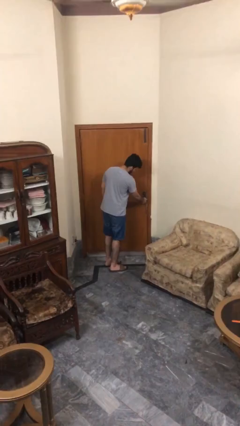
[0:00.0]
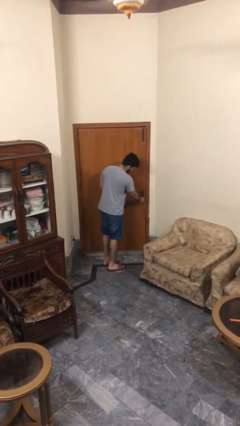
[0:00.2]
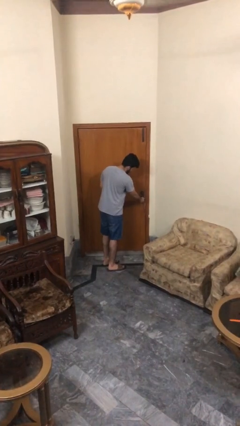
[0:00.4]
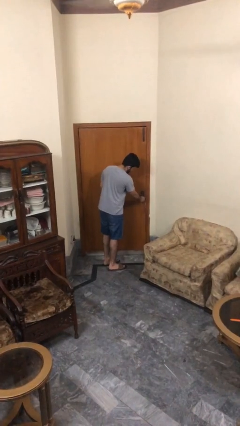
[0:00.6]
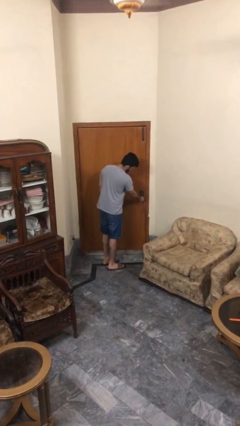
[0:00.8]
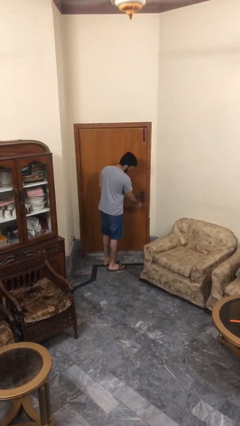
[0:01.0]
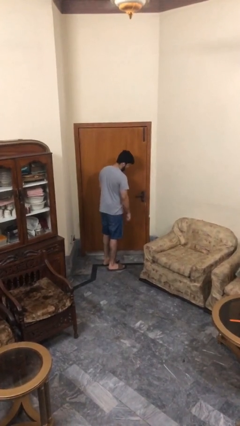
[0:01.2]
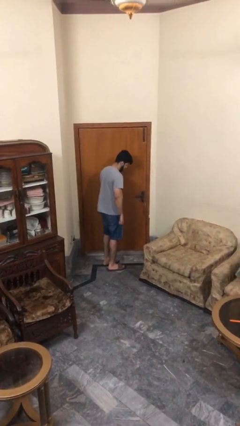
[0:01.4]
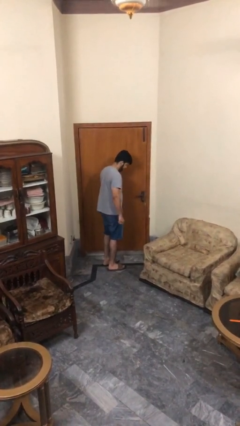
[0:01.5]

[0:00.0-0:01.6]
person locks door with keys

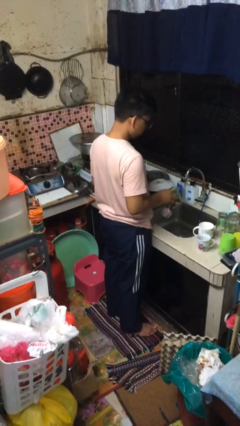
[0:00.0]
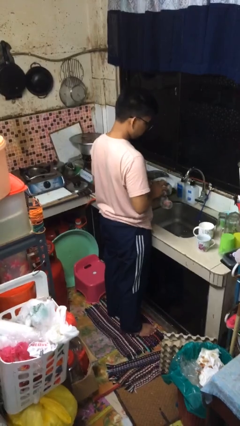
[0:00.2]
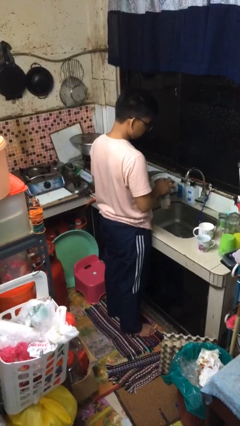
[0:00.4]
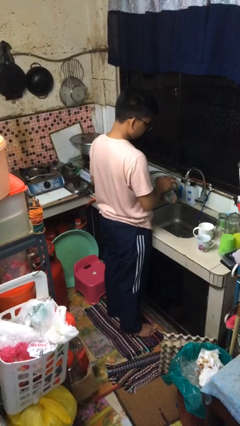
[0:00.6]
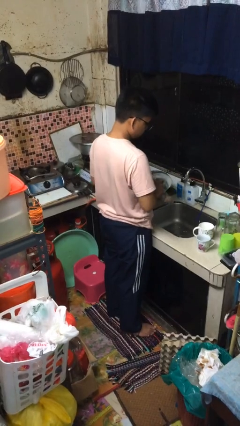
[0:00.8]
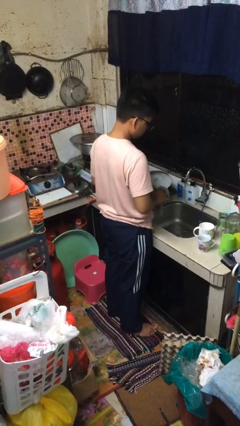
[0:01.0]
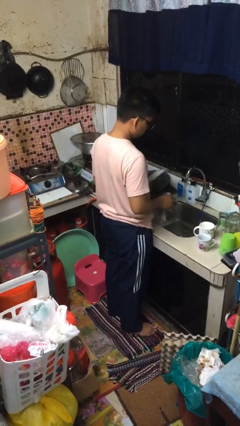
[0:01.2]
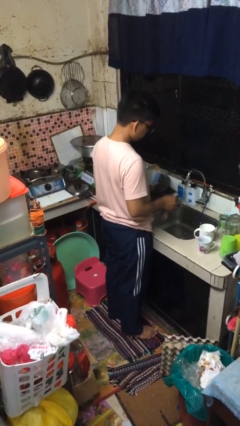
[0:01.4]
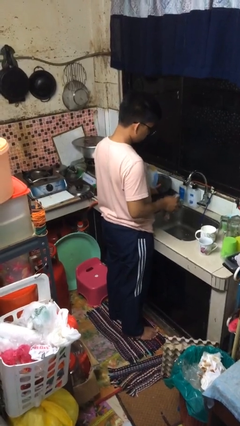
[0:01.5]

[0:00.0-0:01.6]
person dries dish

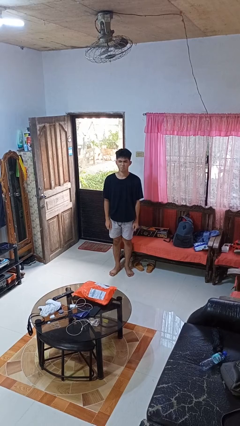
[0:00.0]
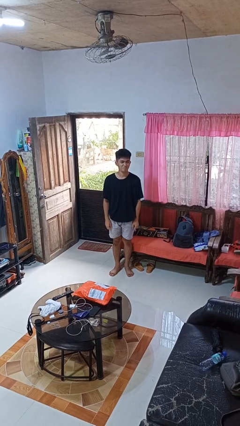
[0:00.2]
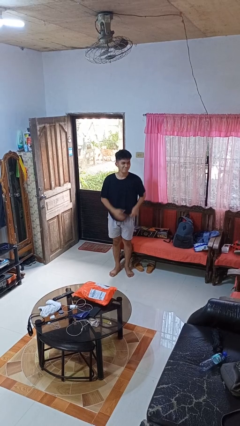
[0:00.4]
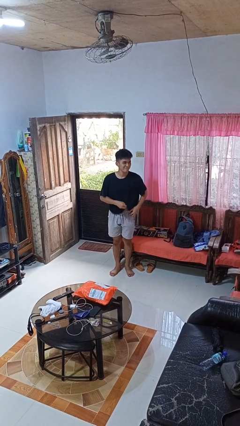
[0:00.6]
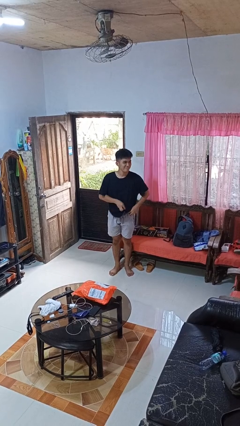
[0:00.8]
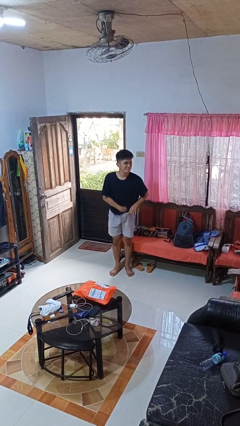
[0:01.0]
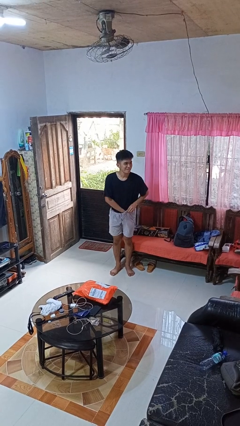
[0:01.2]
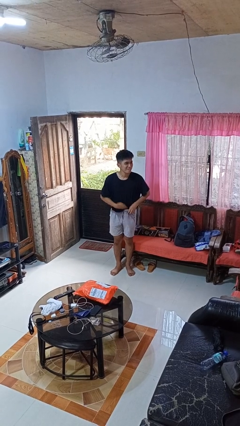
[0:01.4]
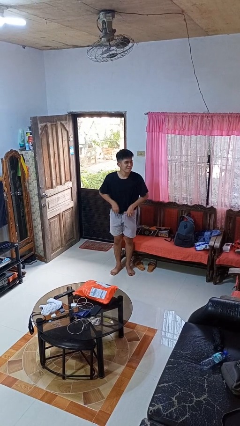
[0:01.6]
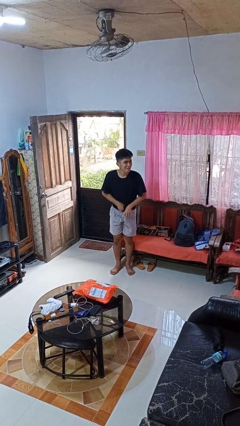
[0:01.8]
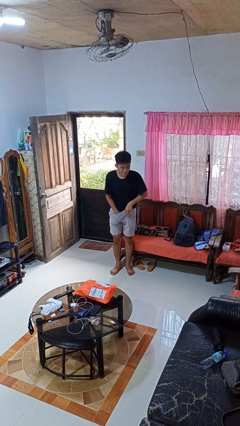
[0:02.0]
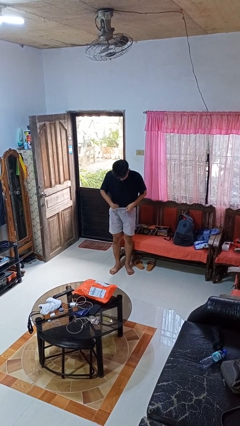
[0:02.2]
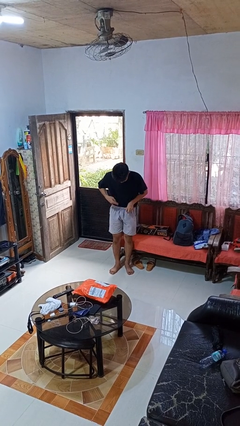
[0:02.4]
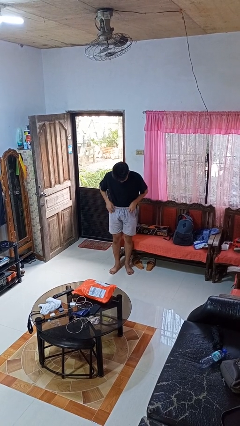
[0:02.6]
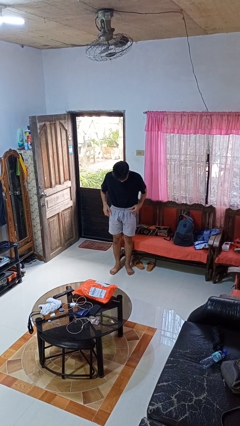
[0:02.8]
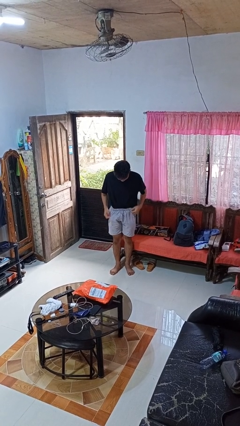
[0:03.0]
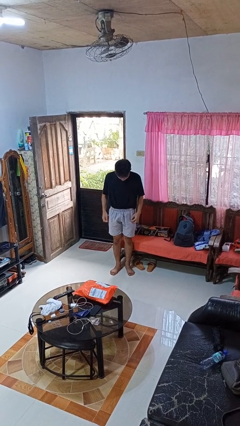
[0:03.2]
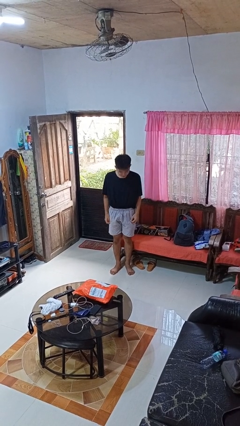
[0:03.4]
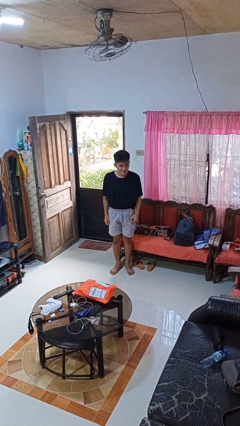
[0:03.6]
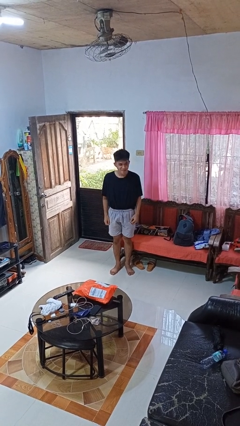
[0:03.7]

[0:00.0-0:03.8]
person tucks in shirt

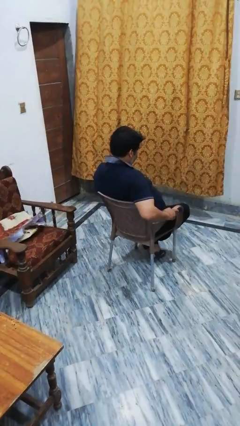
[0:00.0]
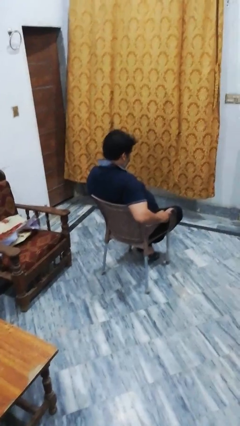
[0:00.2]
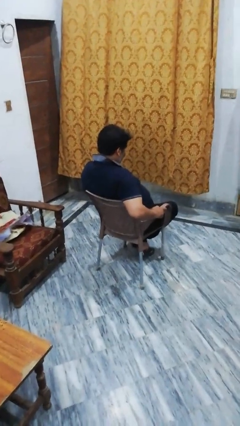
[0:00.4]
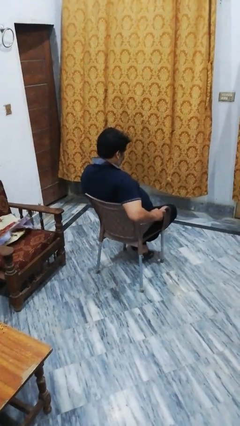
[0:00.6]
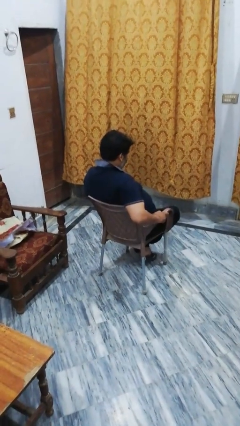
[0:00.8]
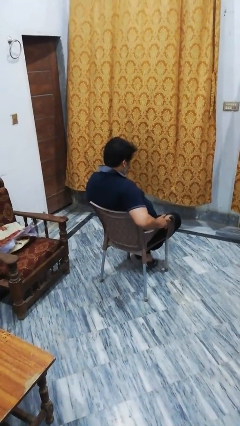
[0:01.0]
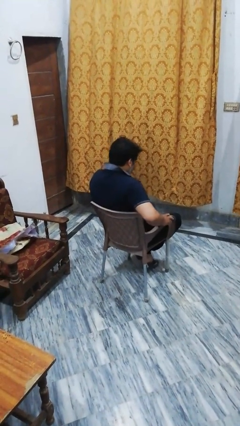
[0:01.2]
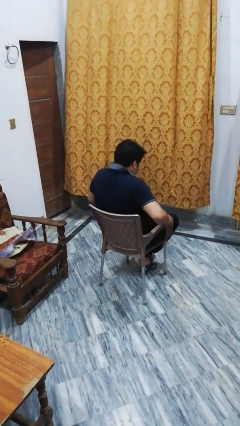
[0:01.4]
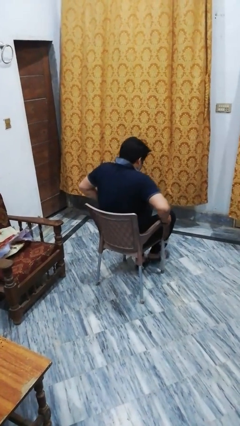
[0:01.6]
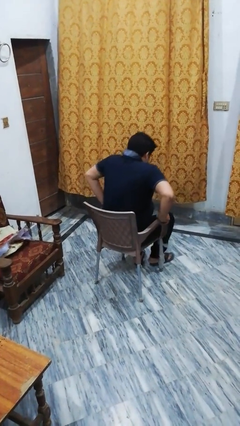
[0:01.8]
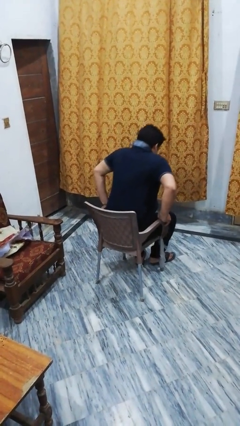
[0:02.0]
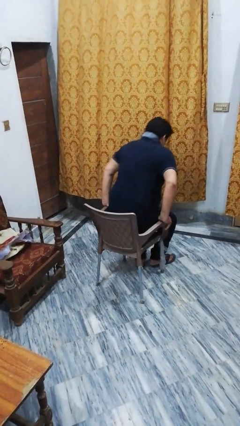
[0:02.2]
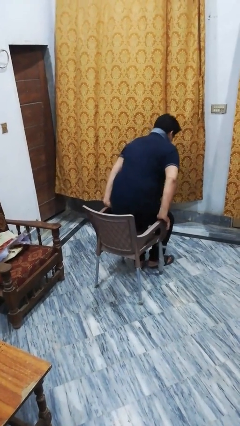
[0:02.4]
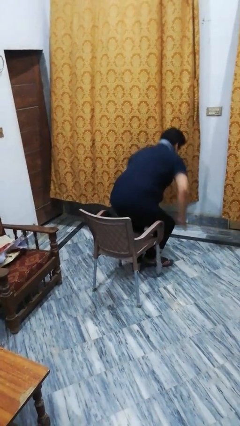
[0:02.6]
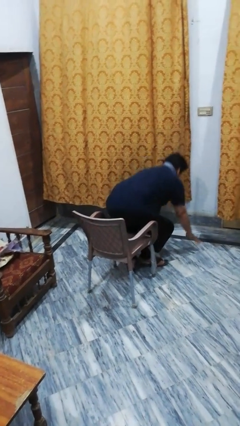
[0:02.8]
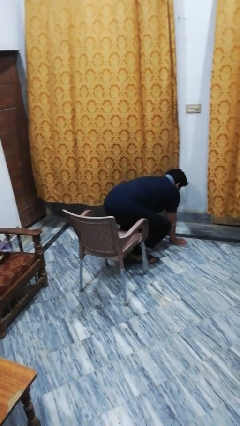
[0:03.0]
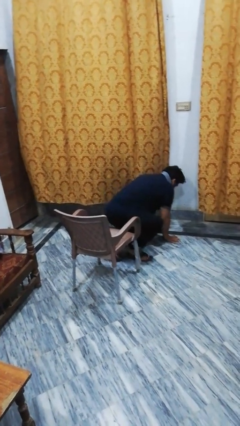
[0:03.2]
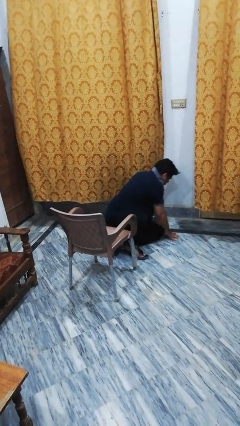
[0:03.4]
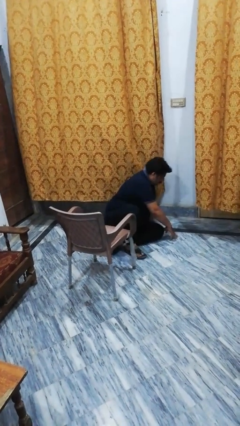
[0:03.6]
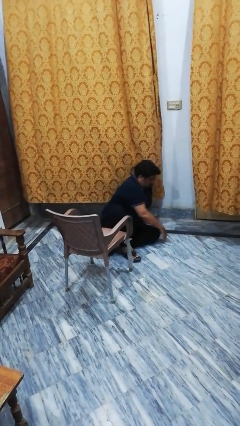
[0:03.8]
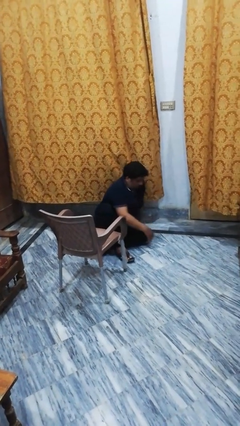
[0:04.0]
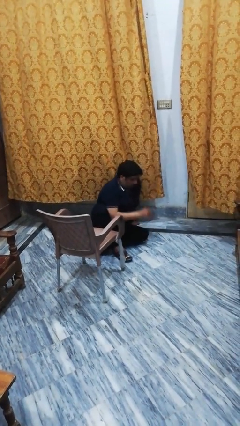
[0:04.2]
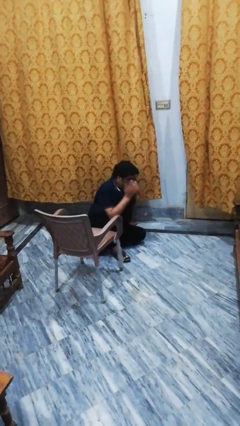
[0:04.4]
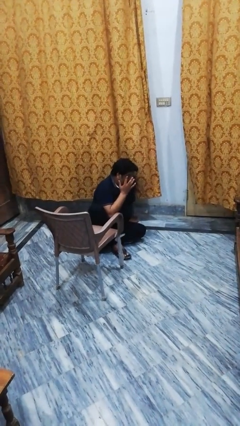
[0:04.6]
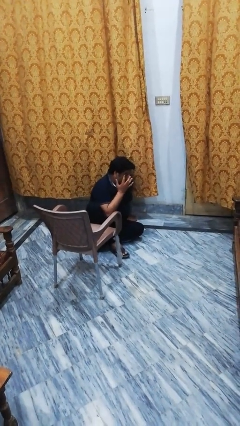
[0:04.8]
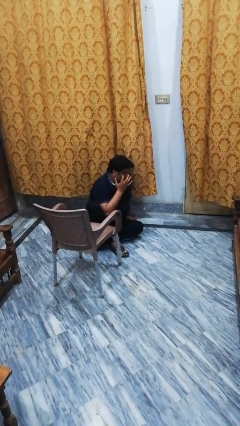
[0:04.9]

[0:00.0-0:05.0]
person falls from chair

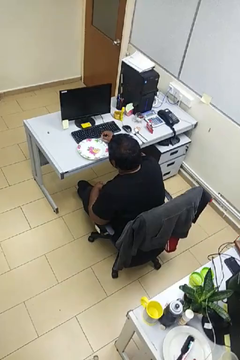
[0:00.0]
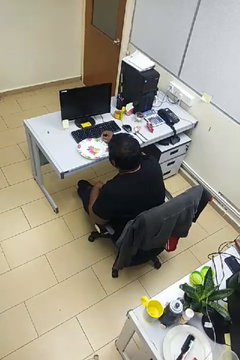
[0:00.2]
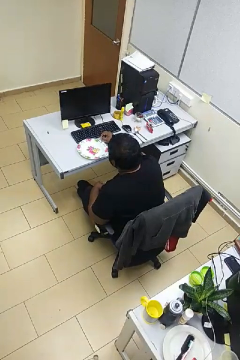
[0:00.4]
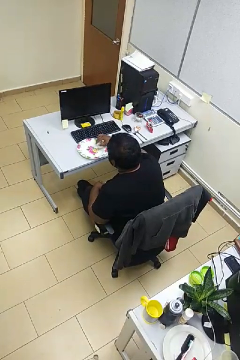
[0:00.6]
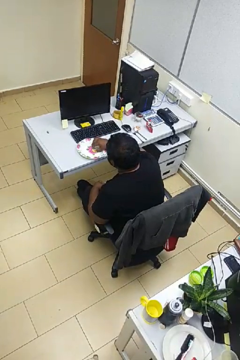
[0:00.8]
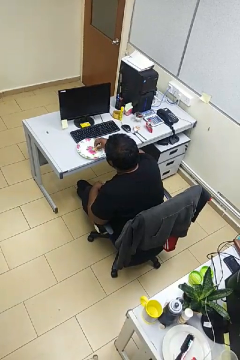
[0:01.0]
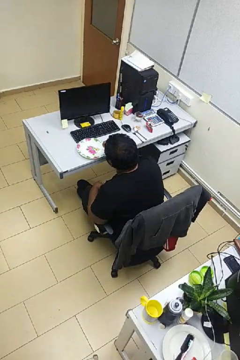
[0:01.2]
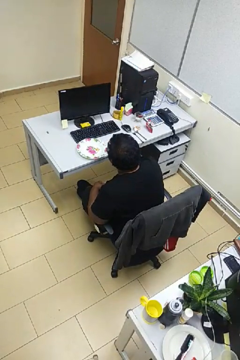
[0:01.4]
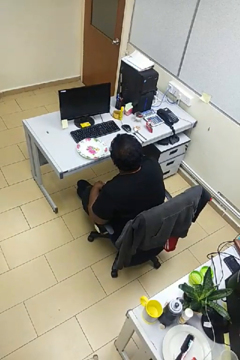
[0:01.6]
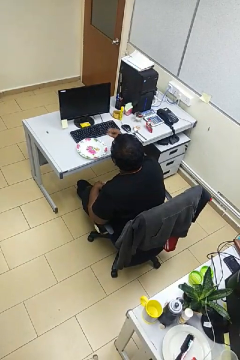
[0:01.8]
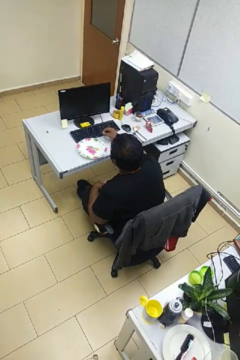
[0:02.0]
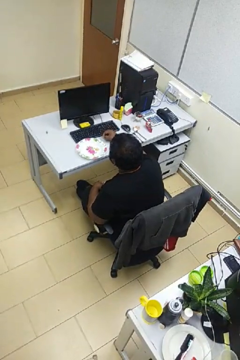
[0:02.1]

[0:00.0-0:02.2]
person eats with hands

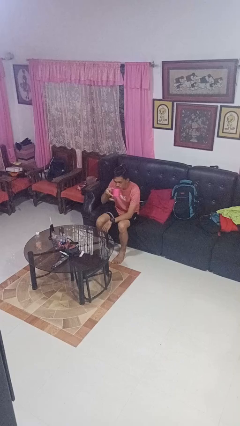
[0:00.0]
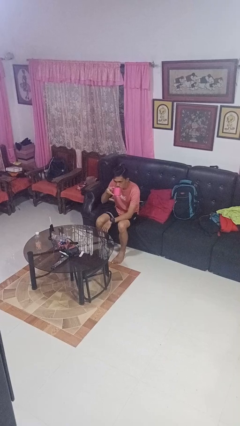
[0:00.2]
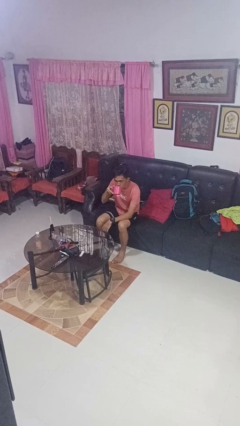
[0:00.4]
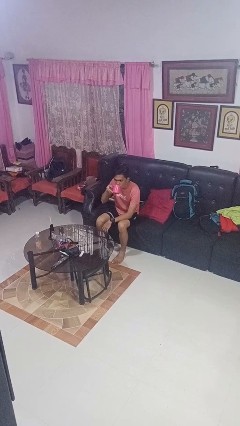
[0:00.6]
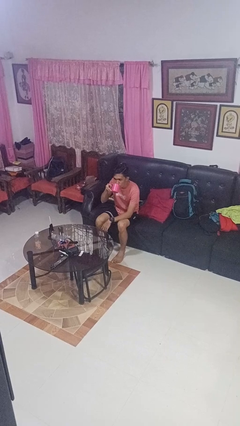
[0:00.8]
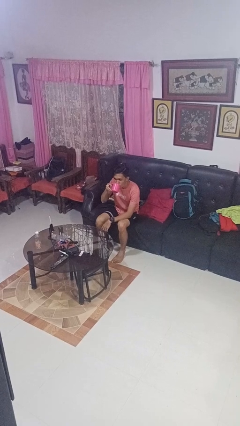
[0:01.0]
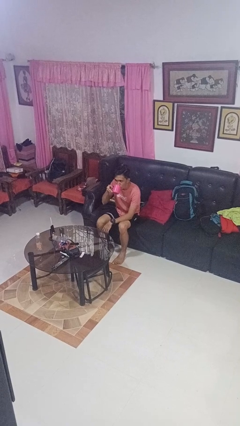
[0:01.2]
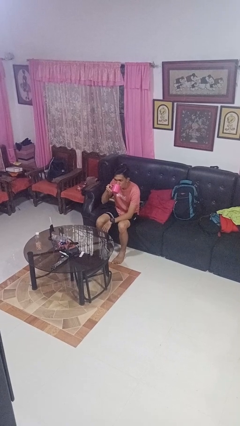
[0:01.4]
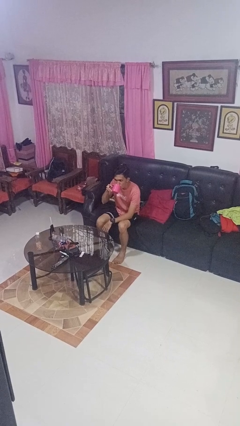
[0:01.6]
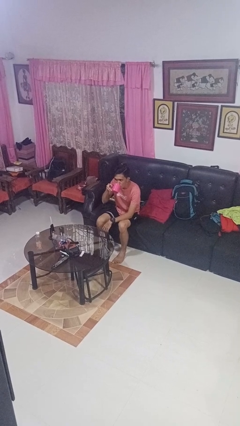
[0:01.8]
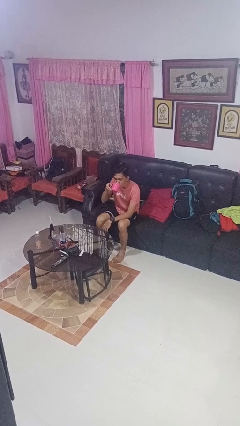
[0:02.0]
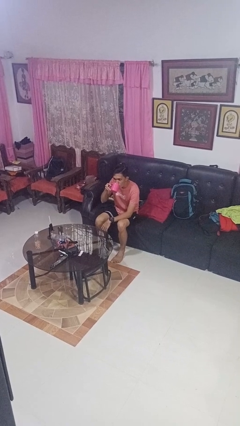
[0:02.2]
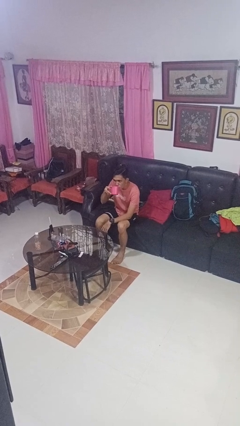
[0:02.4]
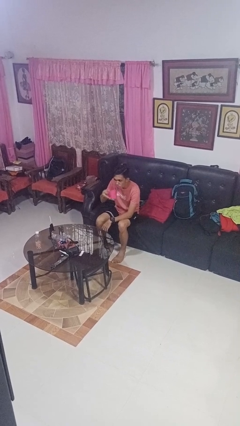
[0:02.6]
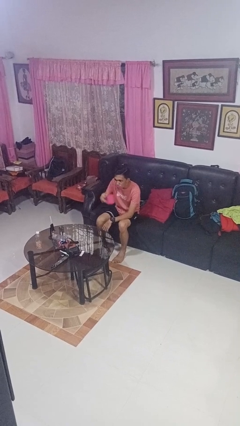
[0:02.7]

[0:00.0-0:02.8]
person drinks from mug

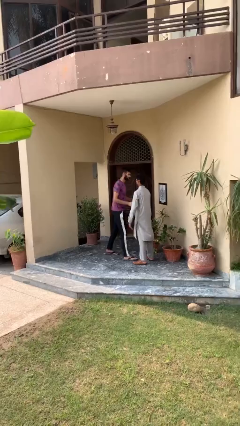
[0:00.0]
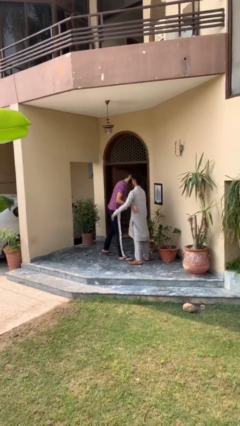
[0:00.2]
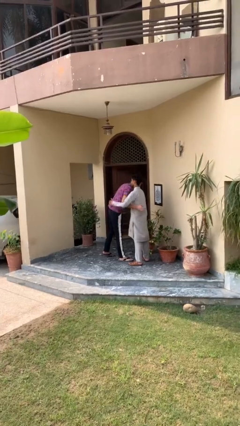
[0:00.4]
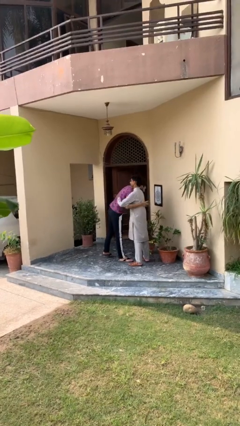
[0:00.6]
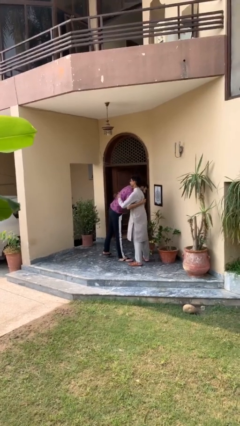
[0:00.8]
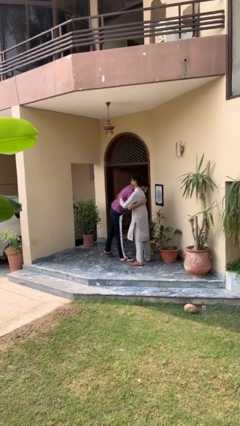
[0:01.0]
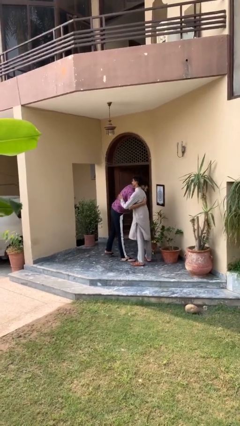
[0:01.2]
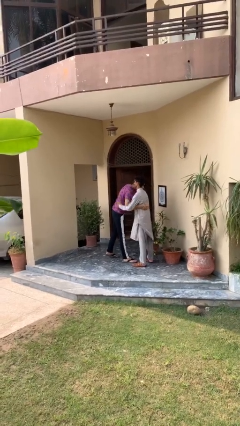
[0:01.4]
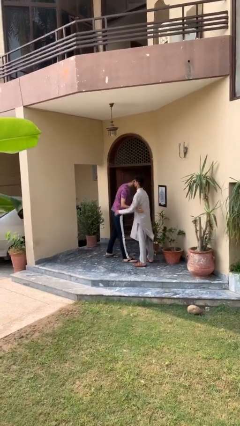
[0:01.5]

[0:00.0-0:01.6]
person embraces person
